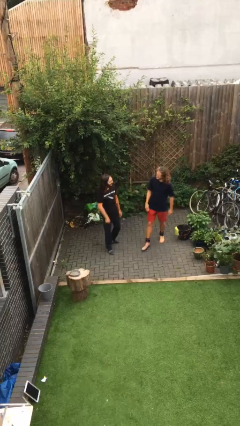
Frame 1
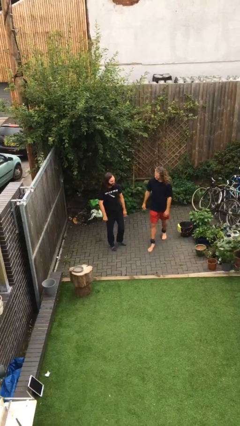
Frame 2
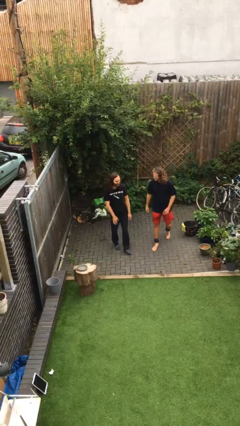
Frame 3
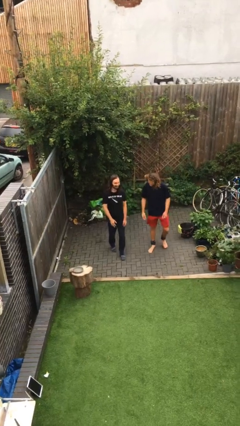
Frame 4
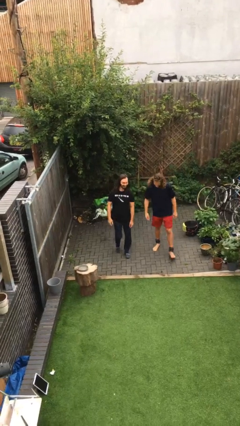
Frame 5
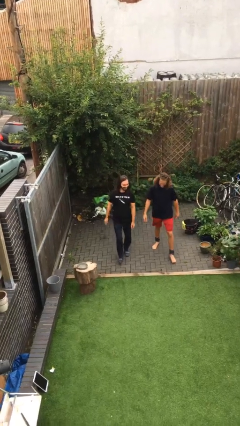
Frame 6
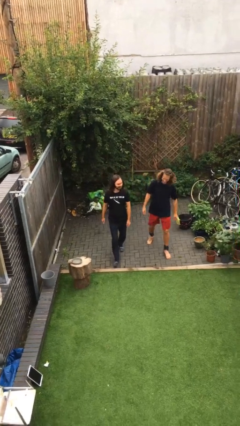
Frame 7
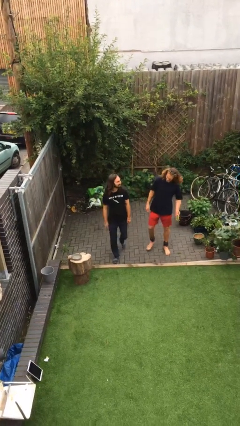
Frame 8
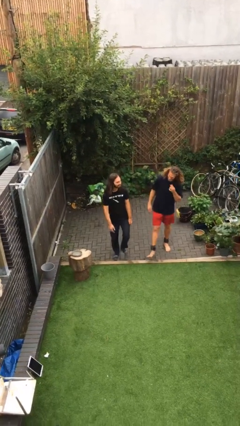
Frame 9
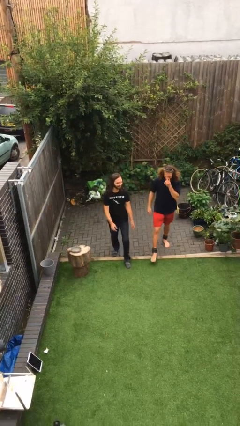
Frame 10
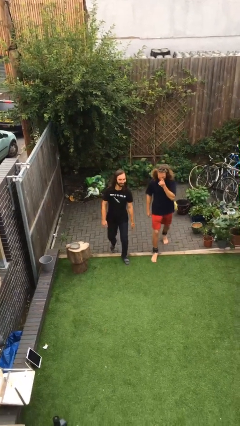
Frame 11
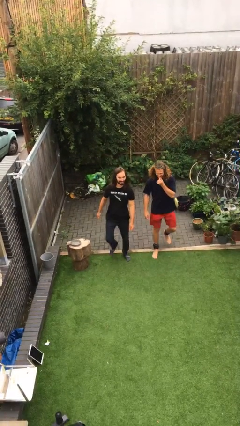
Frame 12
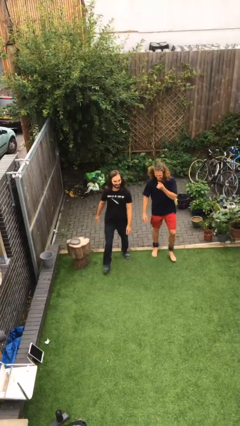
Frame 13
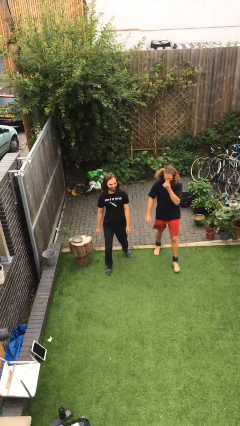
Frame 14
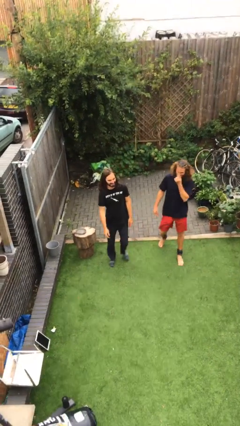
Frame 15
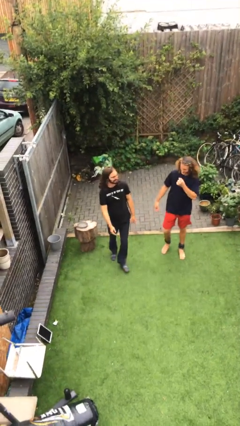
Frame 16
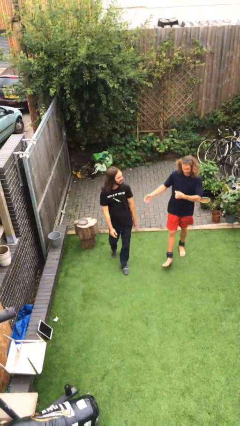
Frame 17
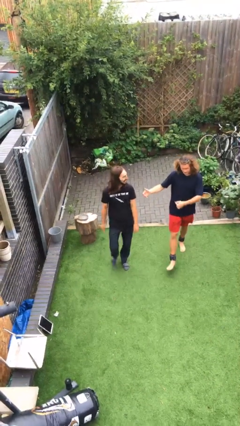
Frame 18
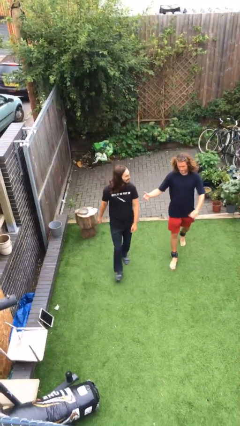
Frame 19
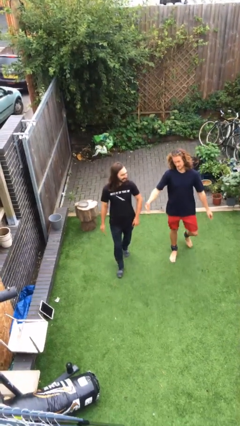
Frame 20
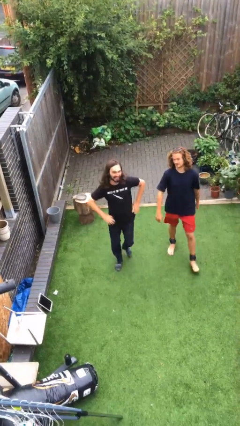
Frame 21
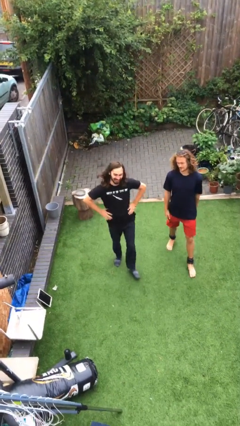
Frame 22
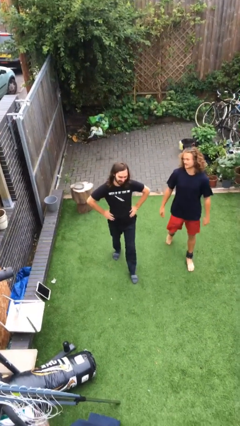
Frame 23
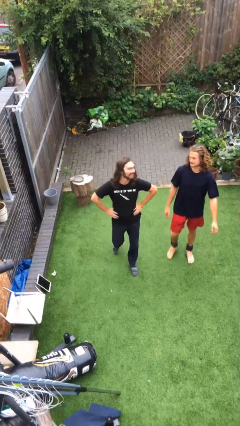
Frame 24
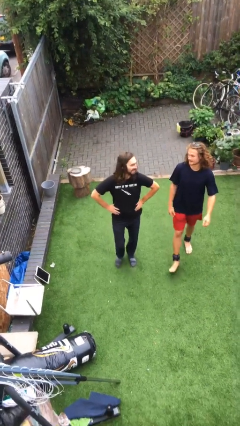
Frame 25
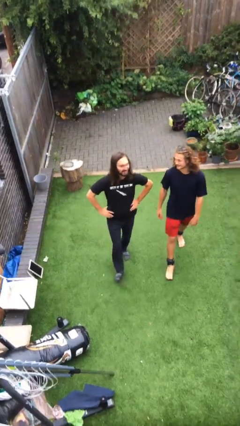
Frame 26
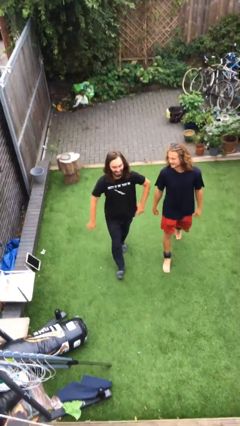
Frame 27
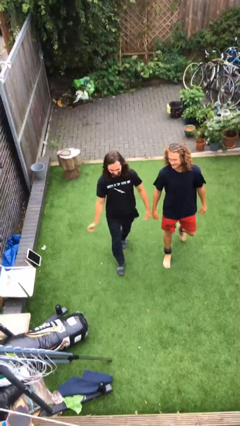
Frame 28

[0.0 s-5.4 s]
person talks to person

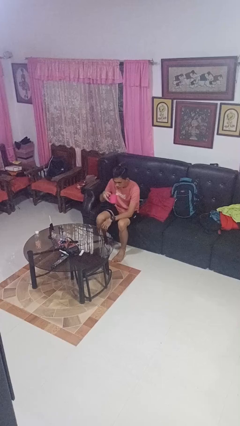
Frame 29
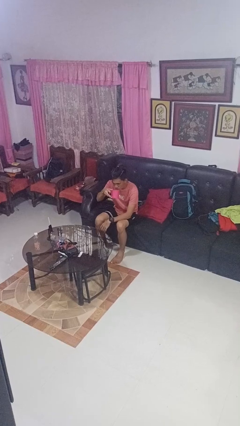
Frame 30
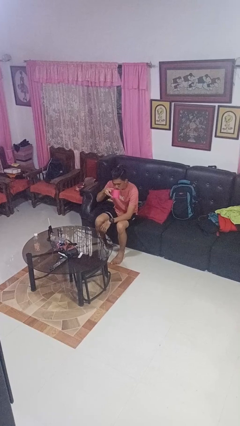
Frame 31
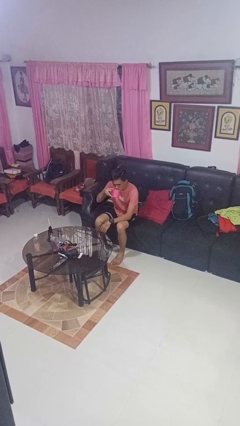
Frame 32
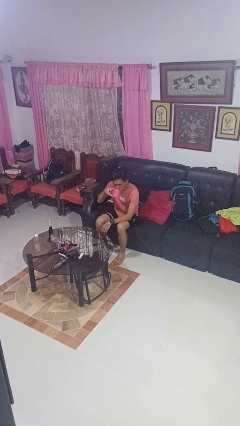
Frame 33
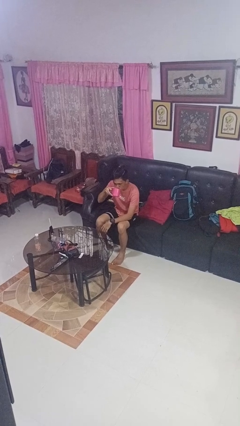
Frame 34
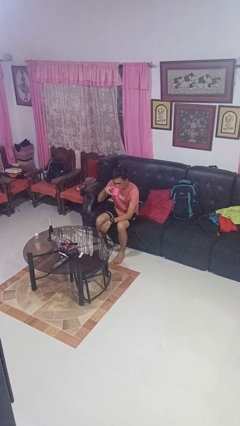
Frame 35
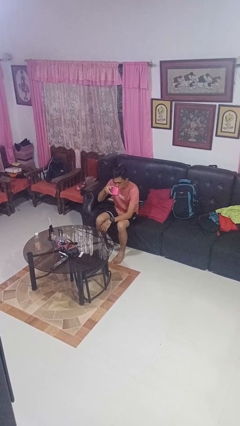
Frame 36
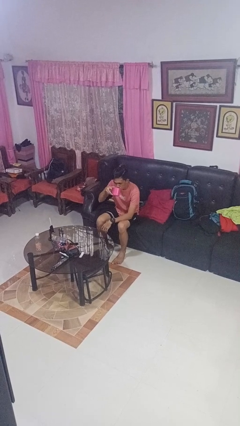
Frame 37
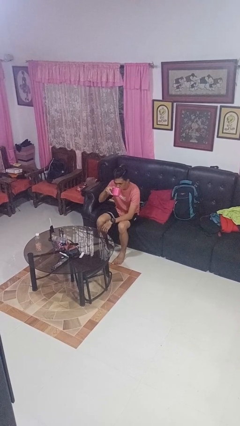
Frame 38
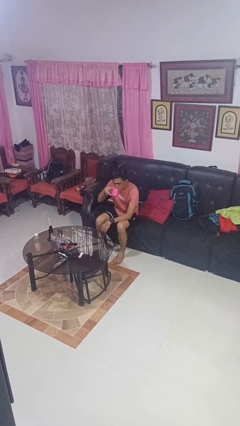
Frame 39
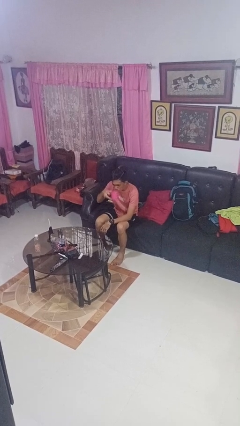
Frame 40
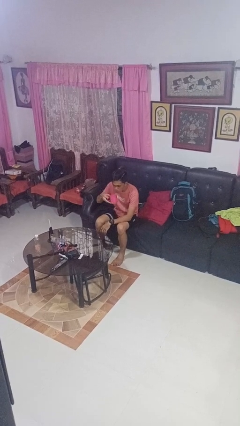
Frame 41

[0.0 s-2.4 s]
person drinks from mug

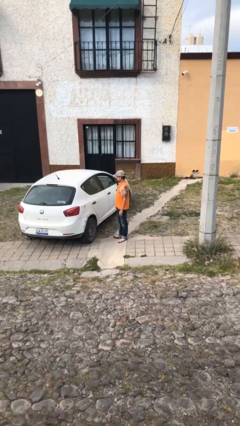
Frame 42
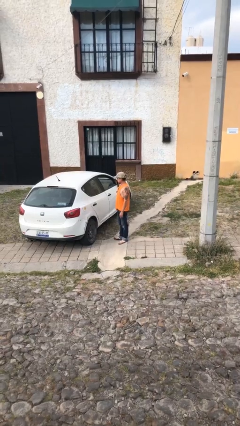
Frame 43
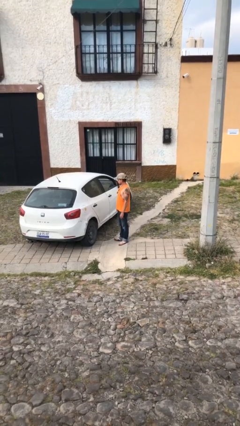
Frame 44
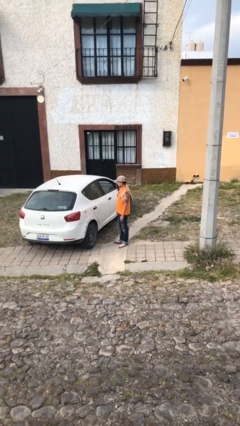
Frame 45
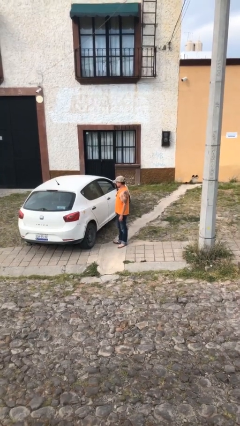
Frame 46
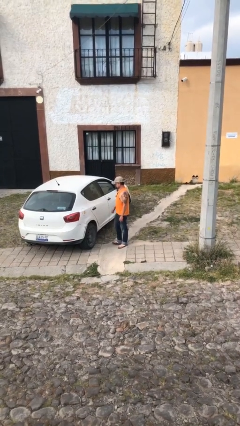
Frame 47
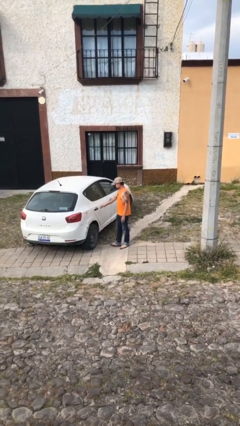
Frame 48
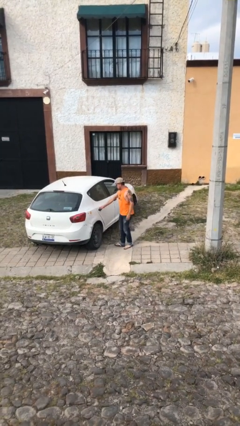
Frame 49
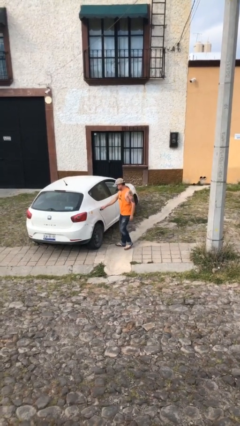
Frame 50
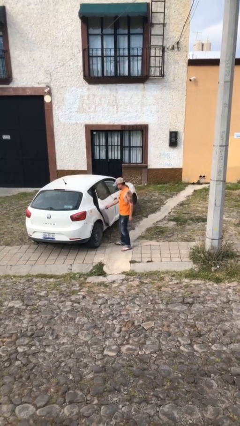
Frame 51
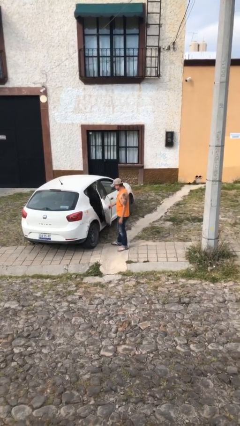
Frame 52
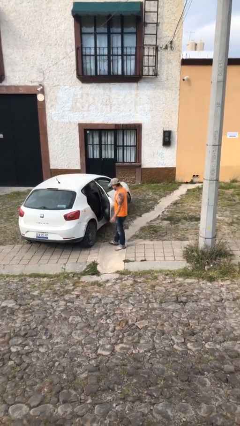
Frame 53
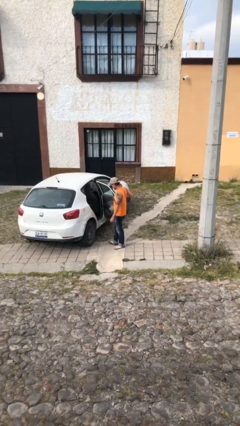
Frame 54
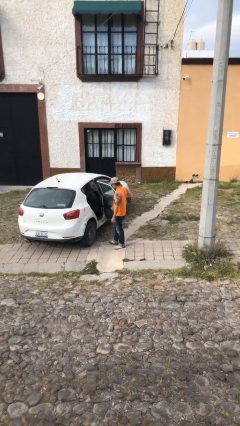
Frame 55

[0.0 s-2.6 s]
person opens car door

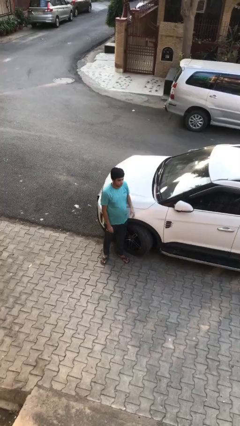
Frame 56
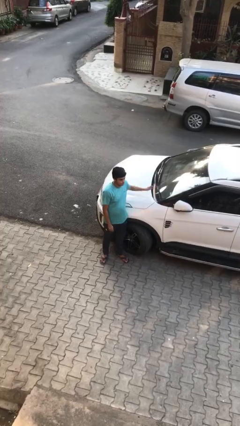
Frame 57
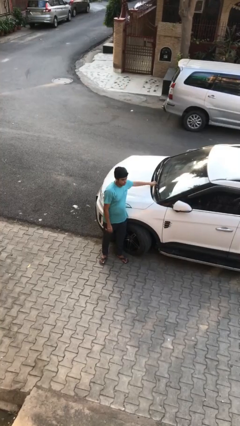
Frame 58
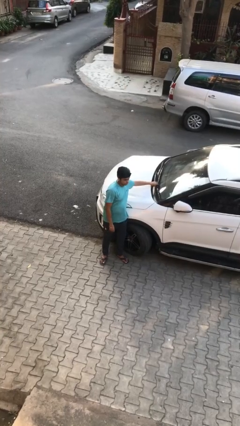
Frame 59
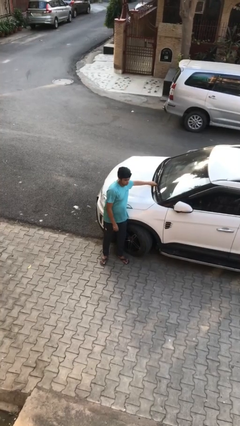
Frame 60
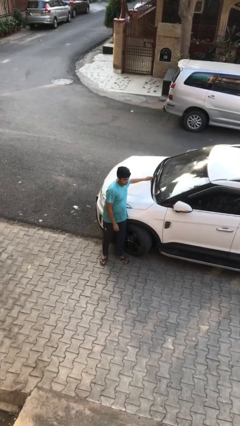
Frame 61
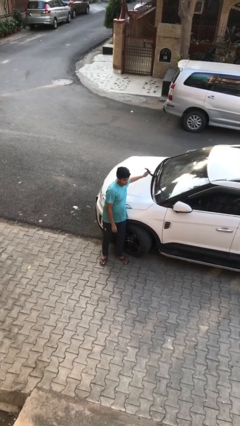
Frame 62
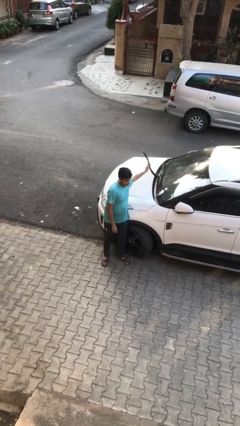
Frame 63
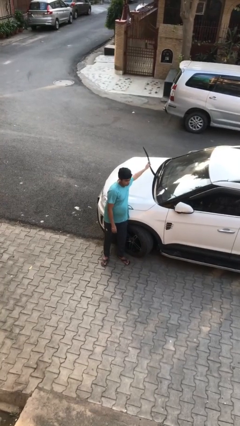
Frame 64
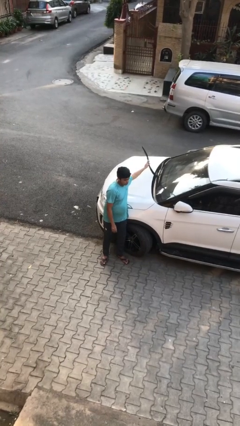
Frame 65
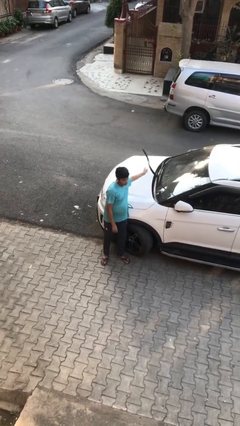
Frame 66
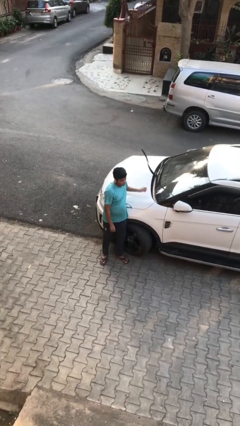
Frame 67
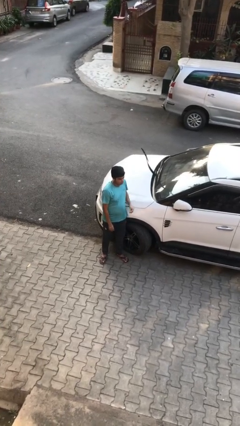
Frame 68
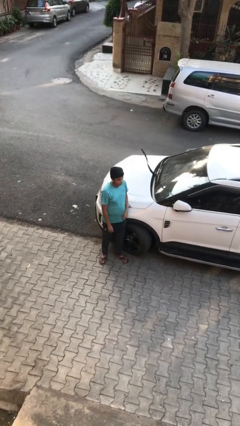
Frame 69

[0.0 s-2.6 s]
person flips up car wipers

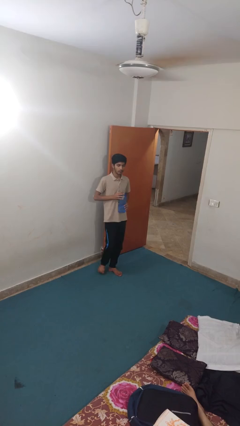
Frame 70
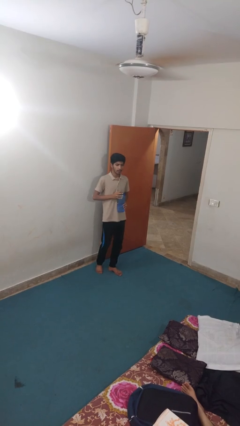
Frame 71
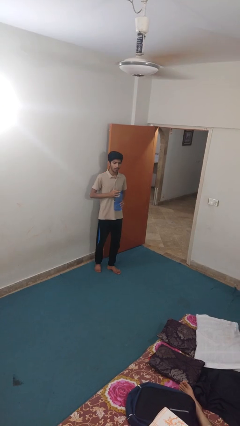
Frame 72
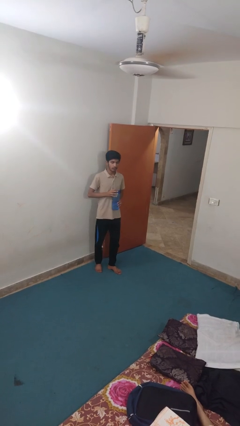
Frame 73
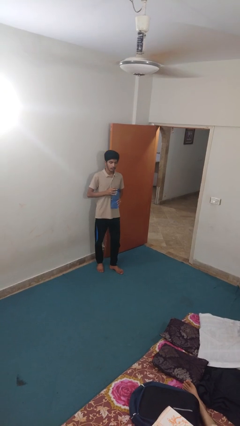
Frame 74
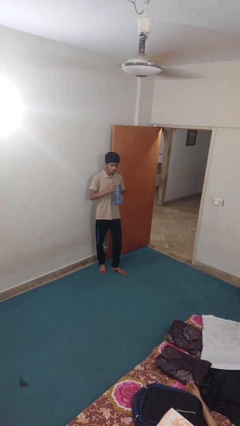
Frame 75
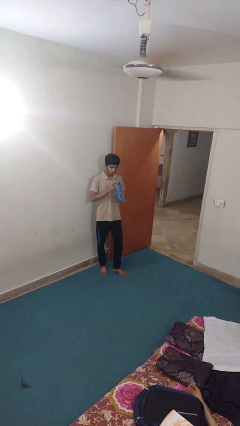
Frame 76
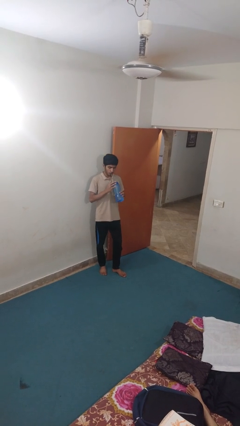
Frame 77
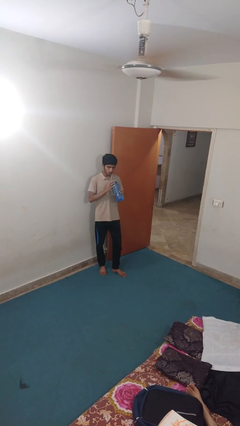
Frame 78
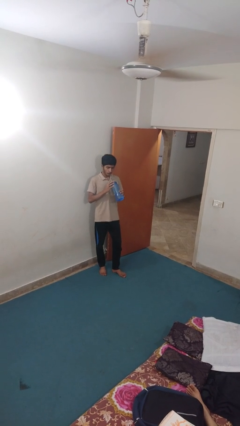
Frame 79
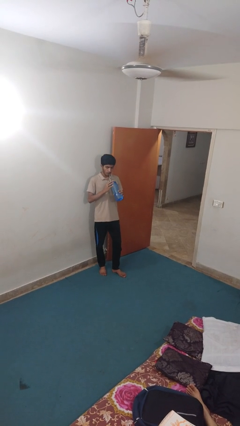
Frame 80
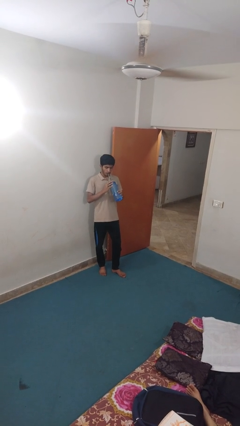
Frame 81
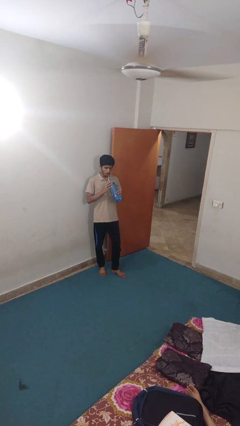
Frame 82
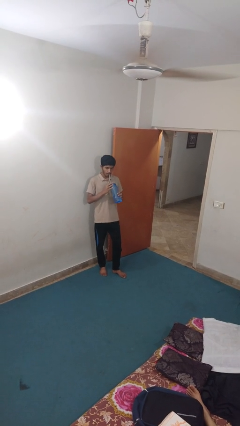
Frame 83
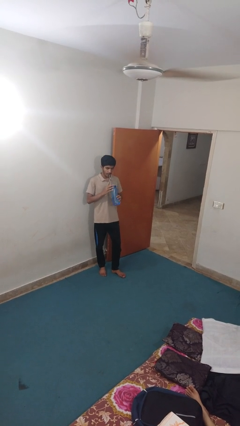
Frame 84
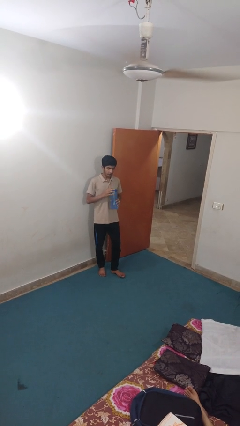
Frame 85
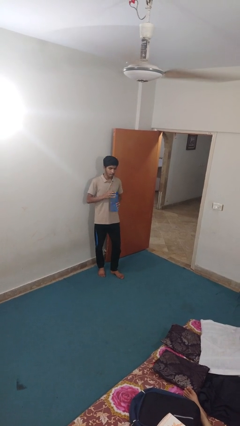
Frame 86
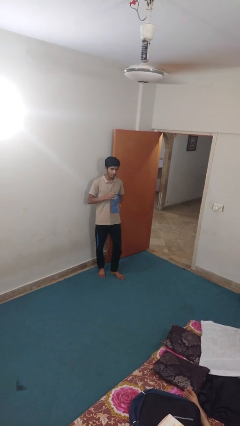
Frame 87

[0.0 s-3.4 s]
person drinks from straw

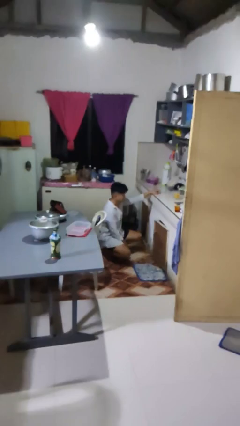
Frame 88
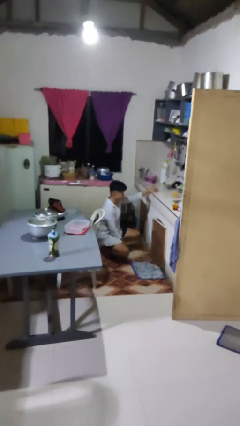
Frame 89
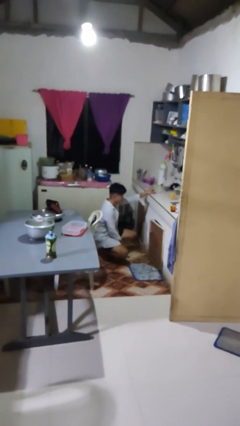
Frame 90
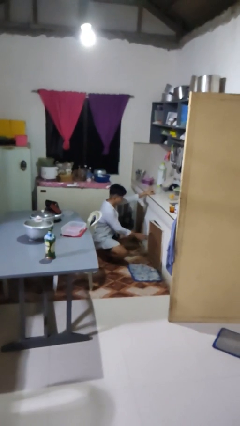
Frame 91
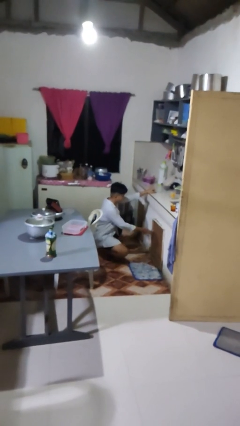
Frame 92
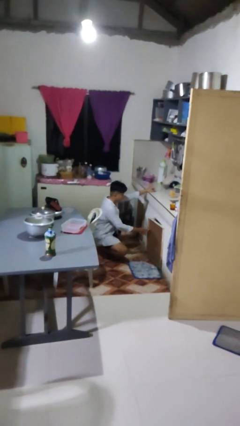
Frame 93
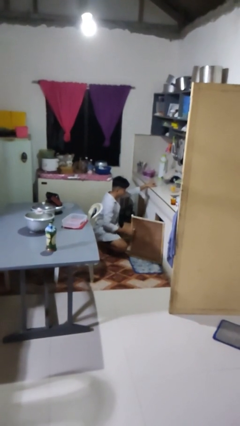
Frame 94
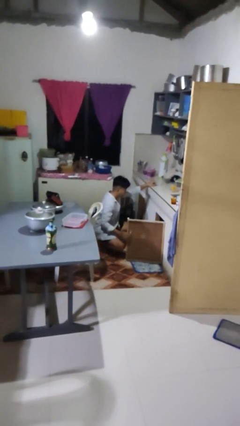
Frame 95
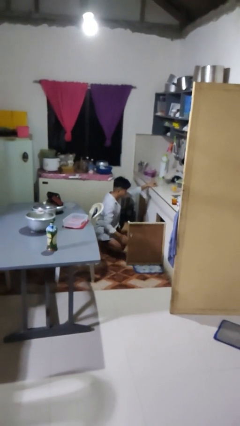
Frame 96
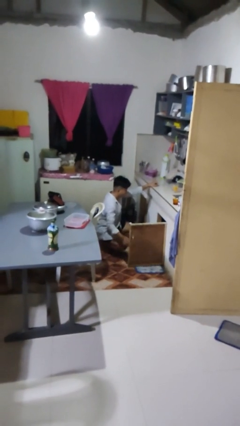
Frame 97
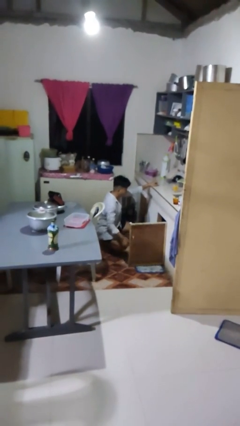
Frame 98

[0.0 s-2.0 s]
person opens cabinet
